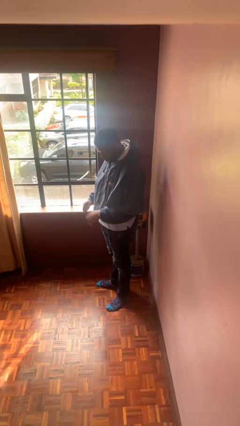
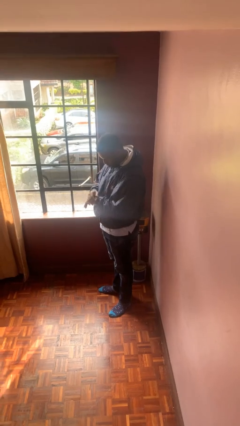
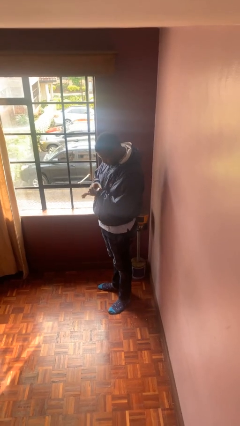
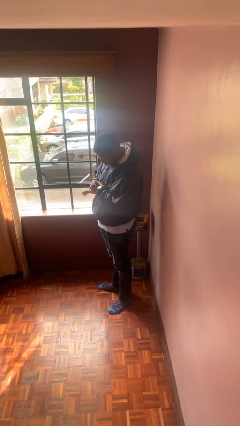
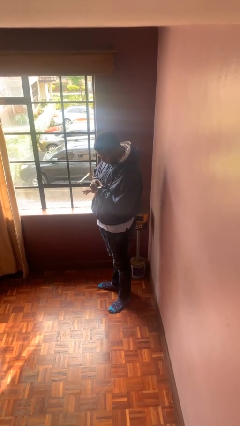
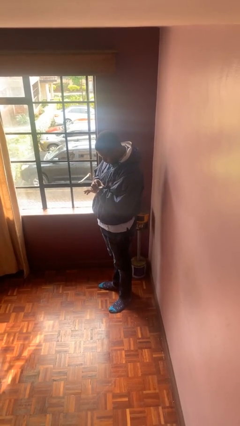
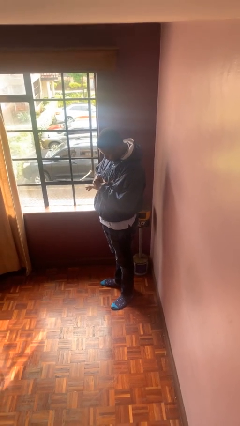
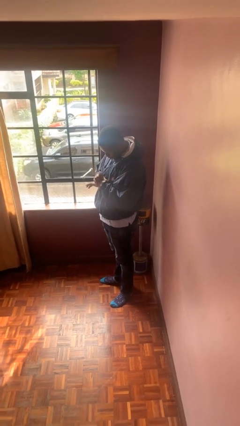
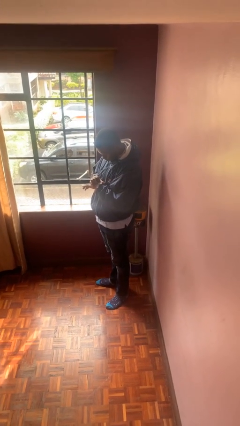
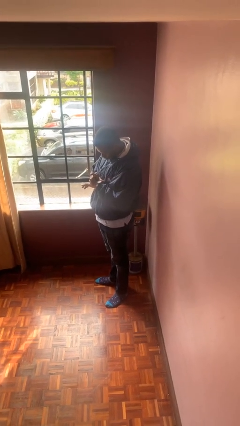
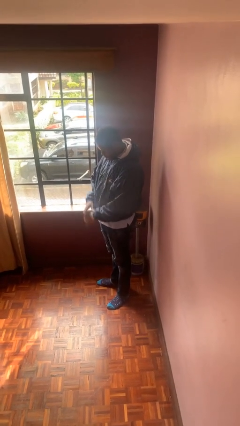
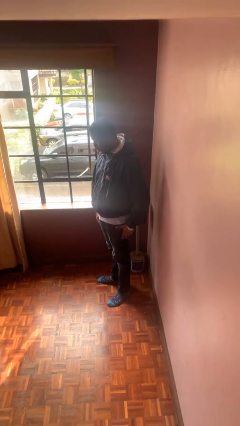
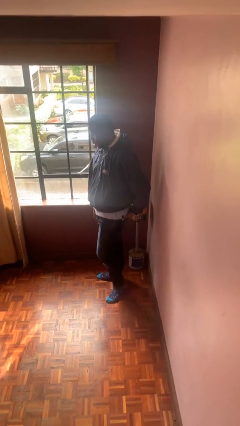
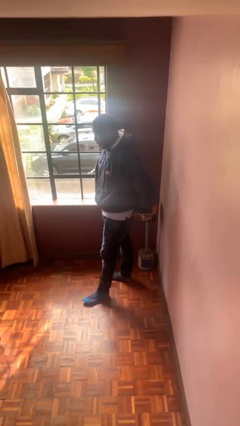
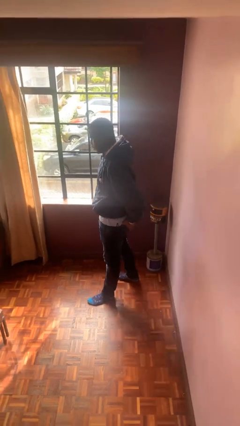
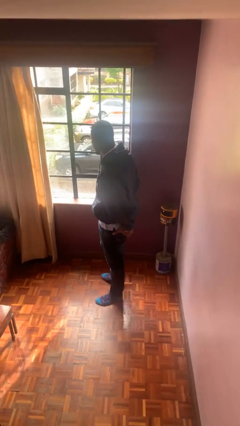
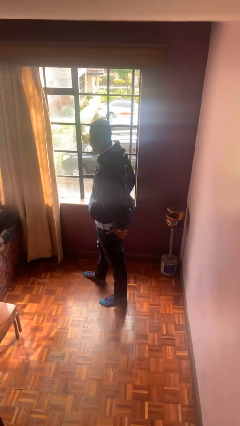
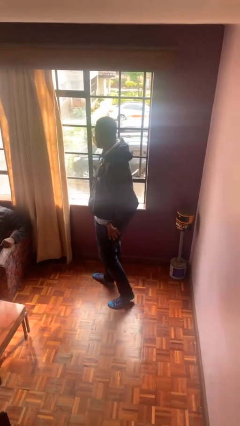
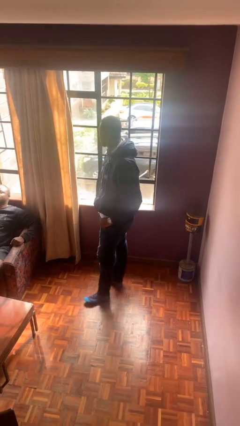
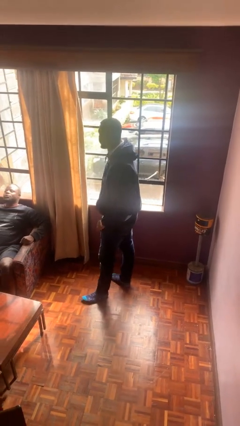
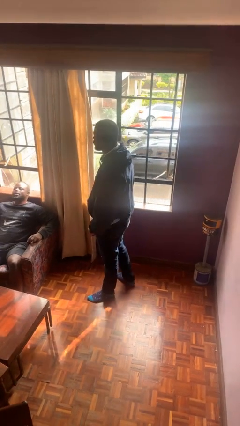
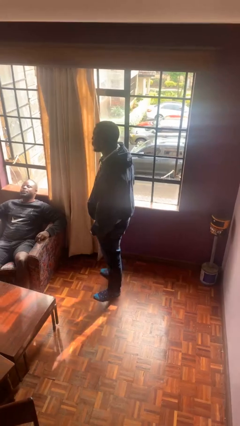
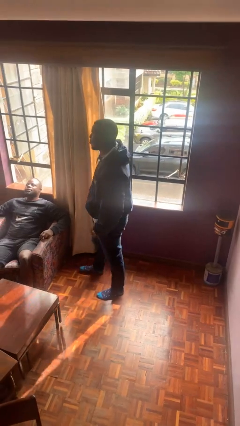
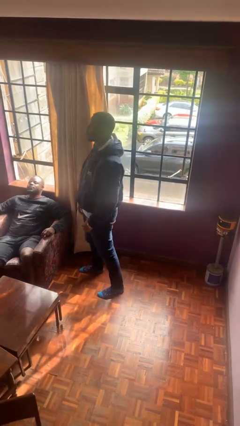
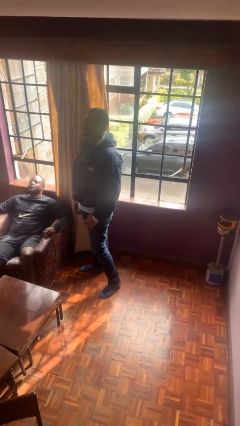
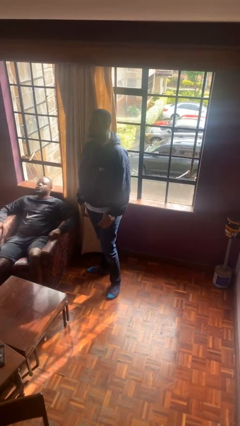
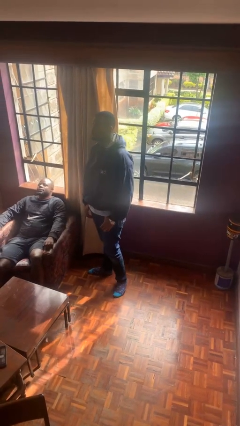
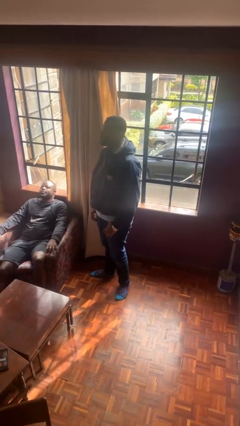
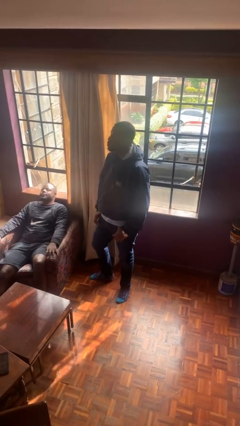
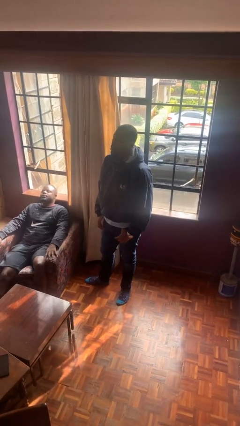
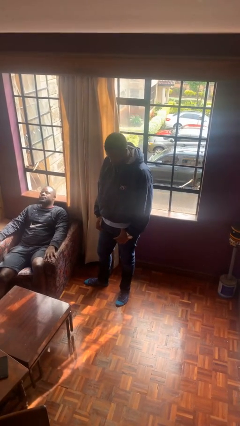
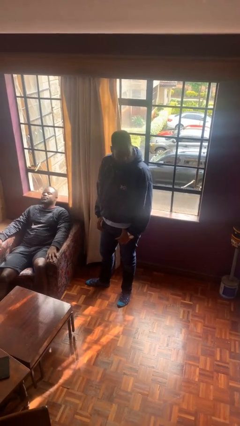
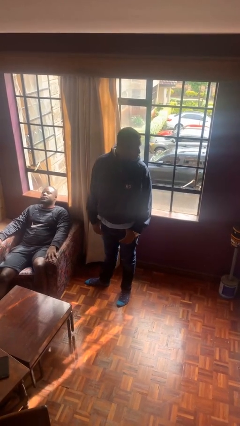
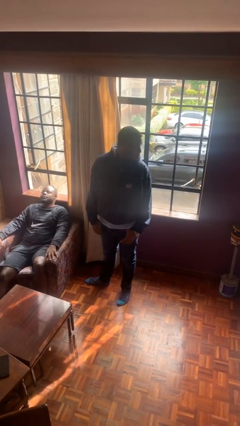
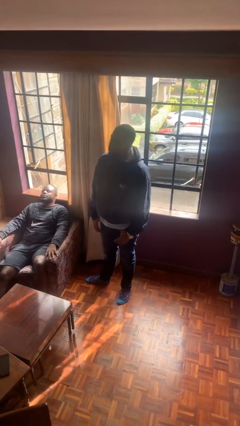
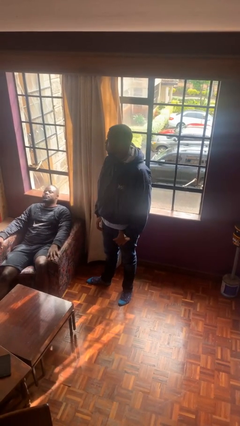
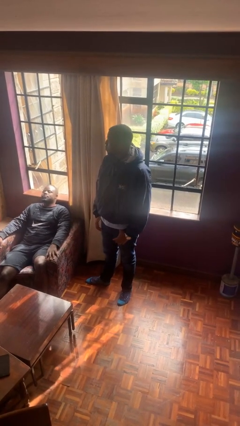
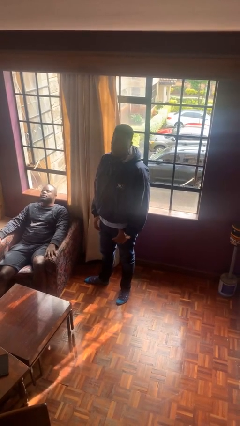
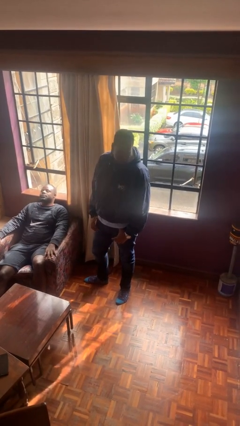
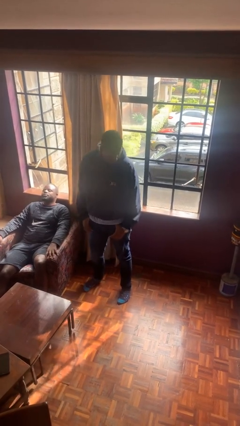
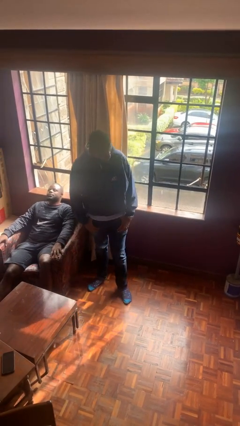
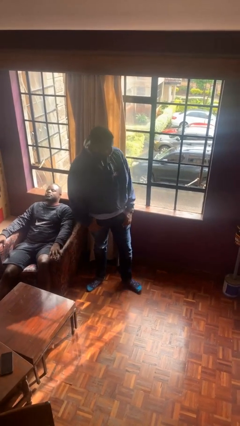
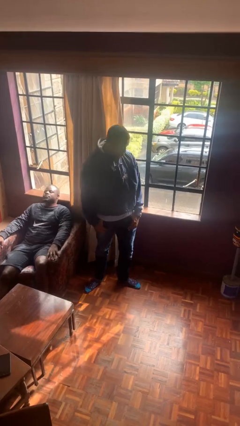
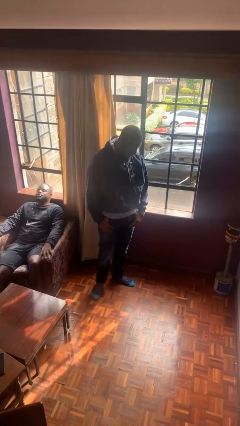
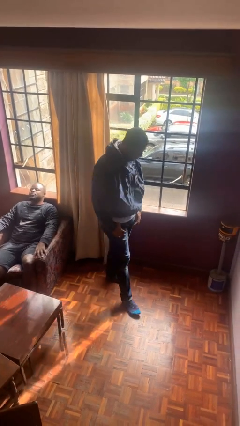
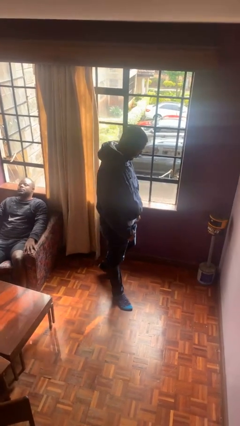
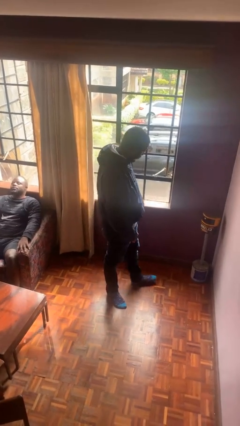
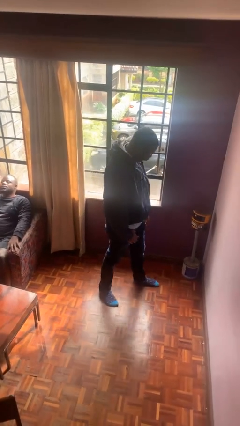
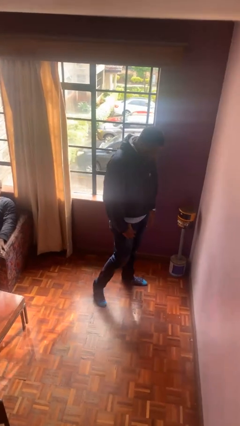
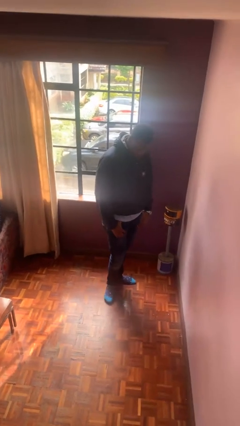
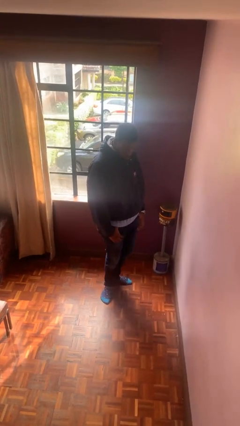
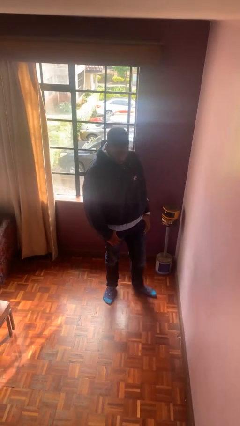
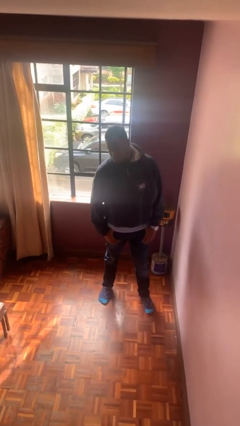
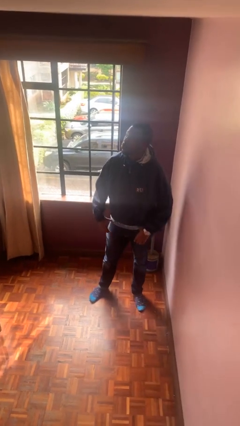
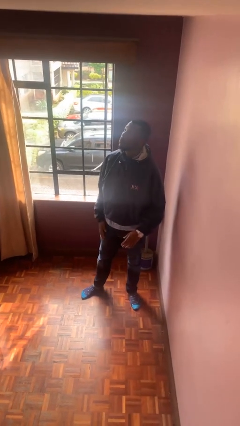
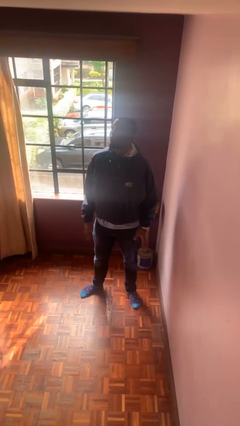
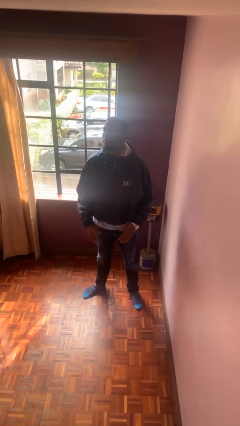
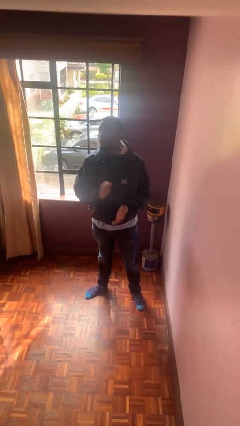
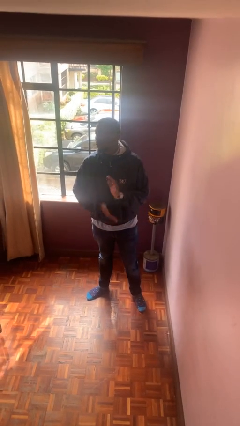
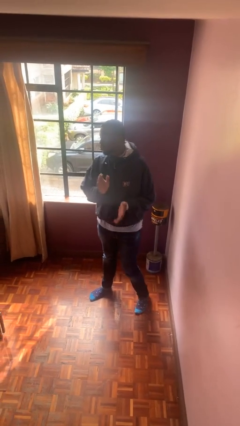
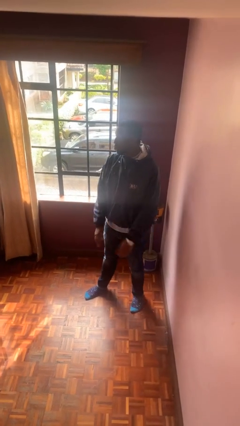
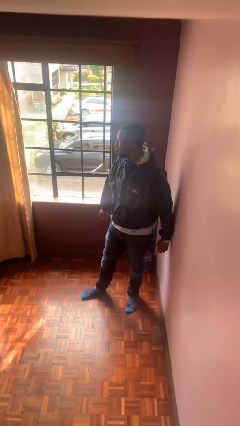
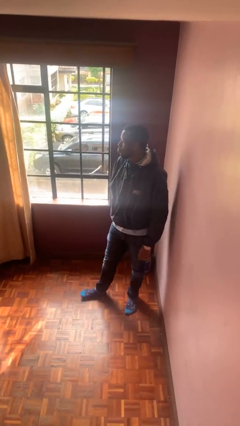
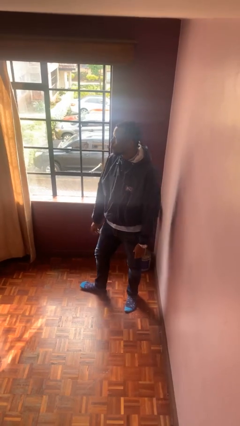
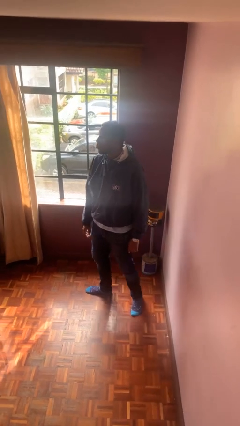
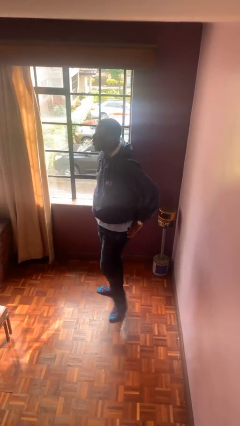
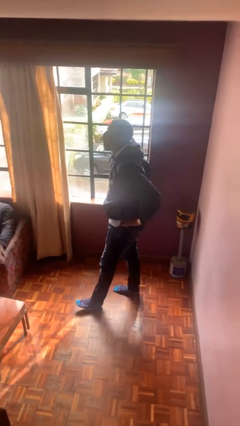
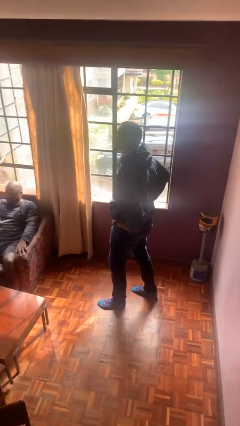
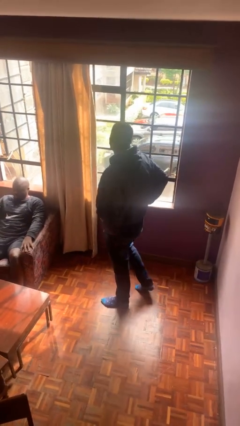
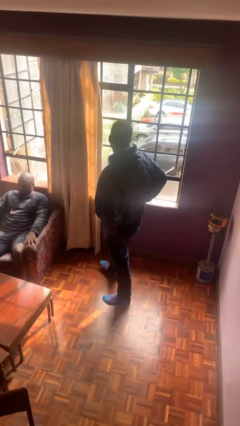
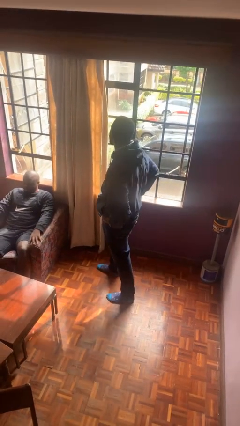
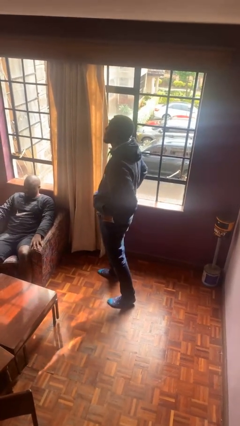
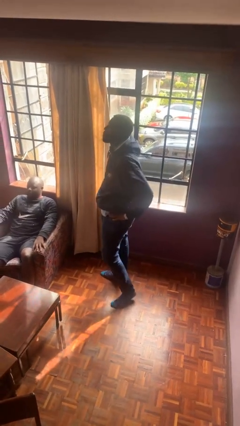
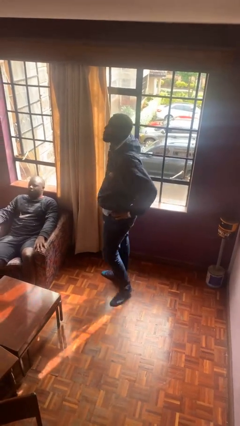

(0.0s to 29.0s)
person walks

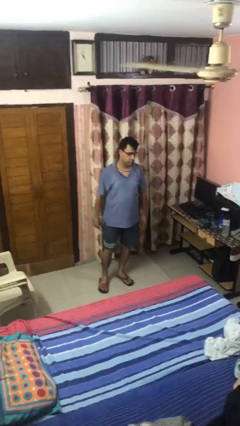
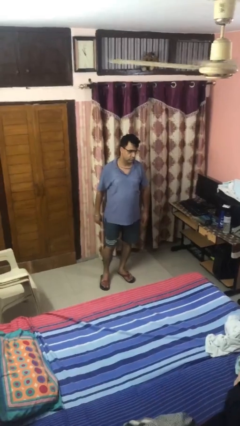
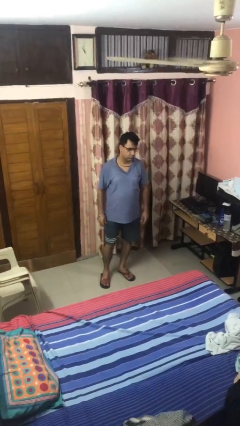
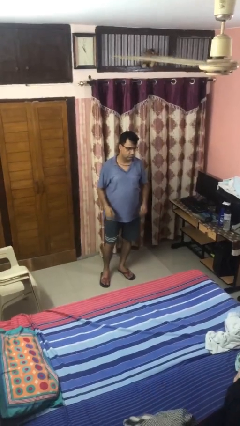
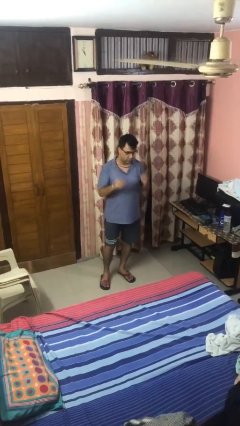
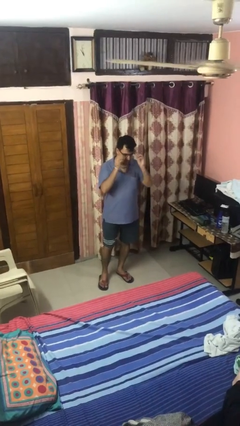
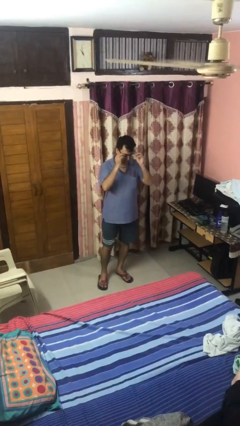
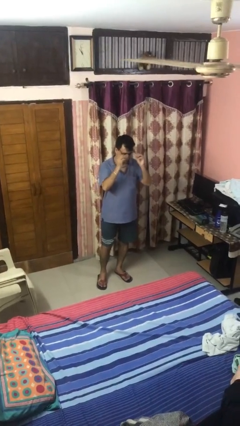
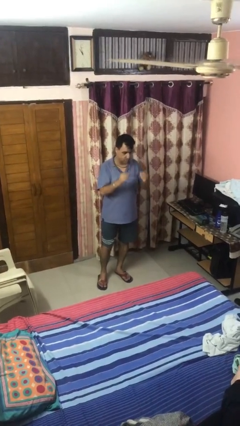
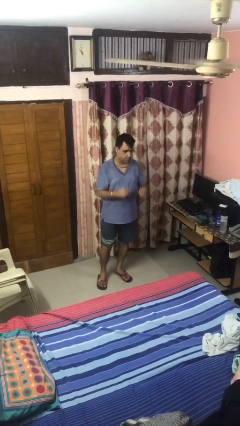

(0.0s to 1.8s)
person takes off glasses

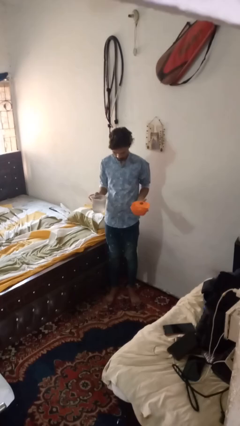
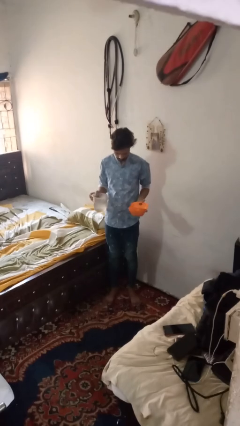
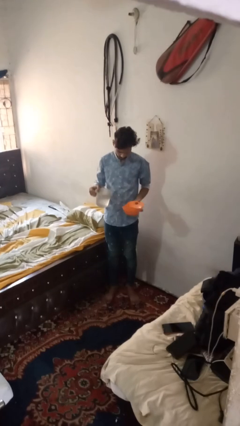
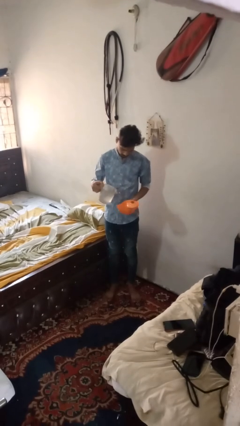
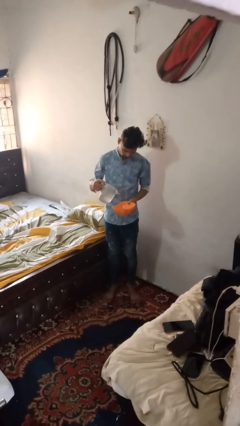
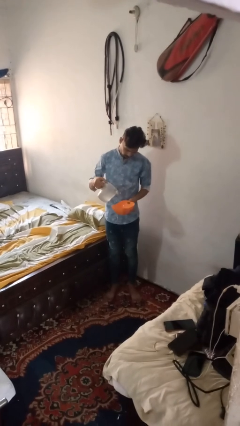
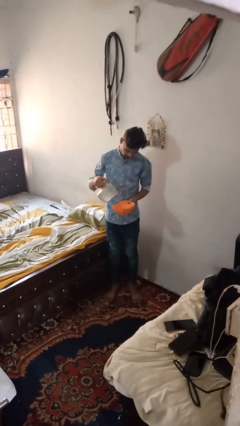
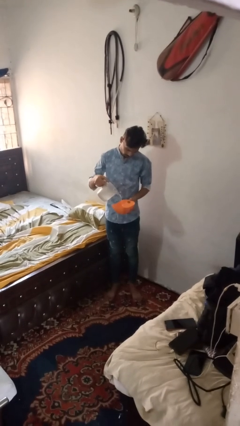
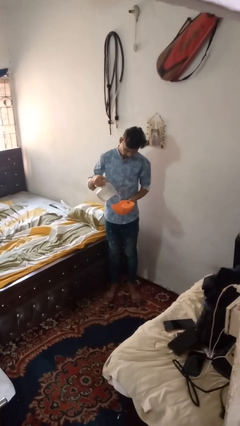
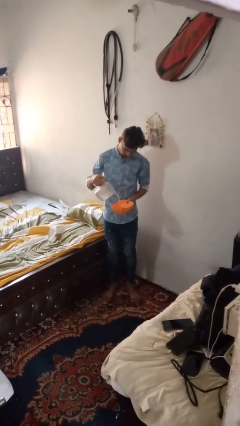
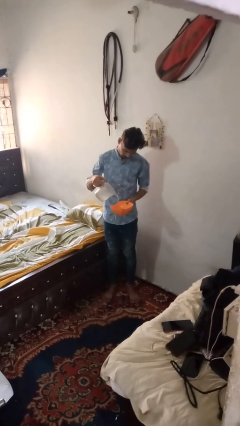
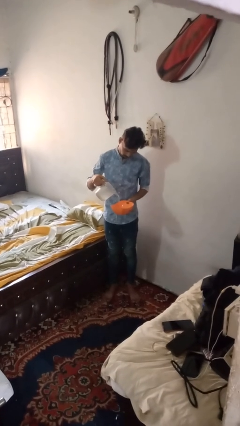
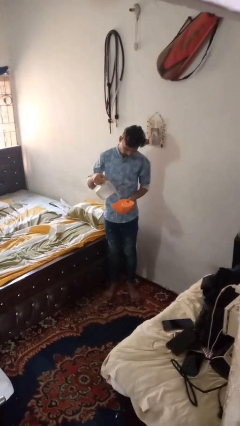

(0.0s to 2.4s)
person pours into bowl
